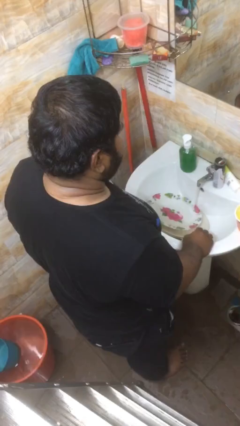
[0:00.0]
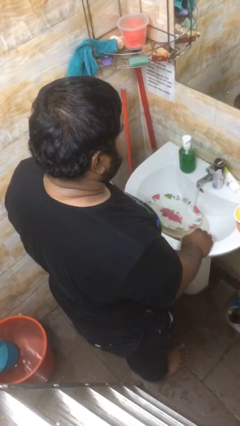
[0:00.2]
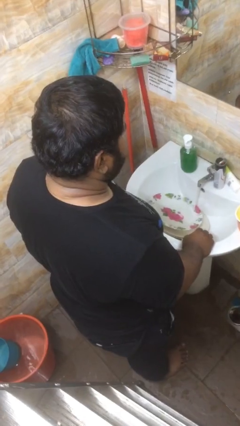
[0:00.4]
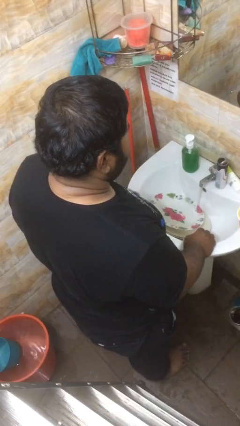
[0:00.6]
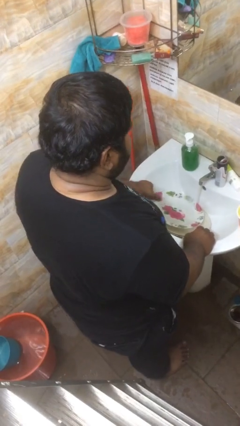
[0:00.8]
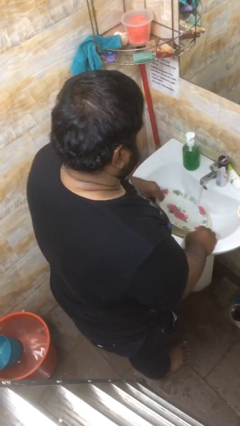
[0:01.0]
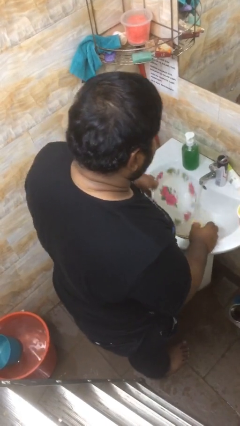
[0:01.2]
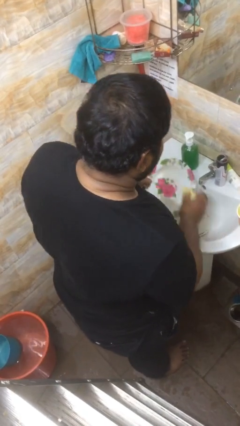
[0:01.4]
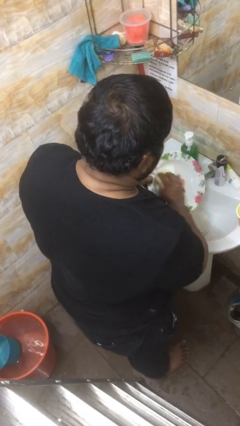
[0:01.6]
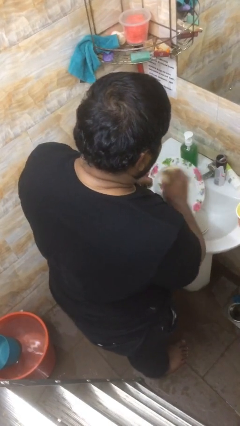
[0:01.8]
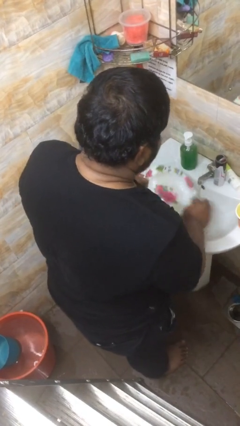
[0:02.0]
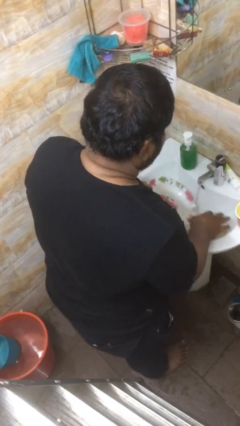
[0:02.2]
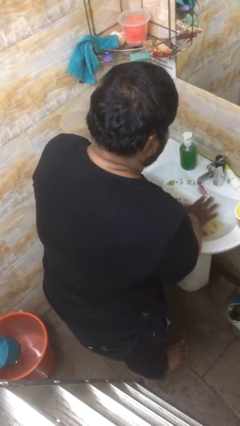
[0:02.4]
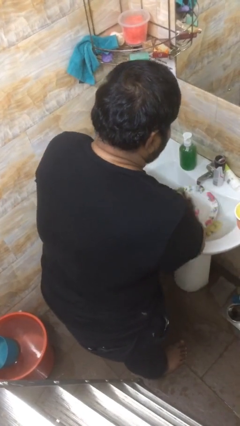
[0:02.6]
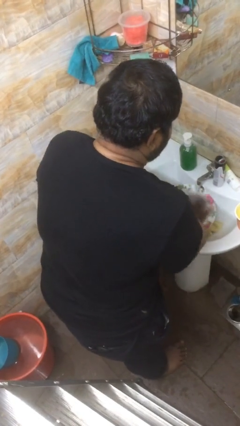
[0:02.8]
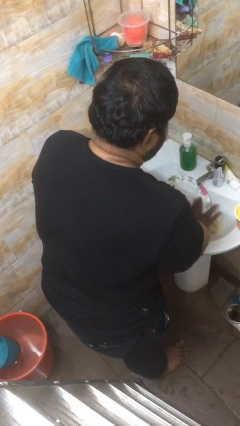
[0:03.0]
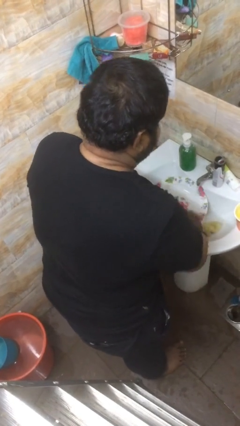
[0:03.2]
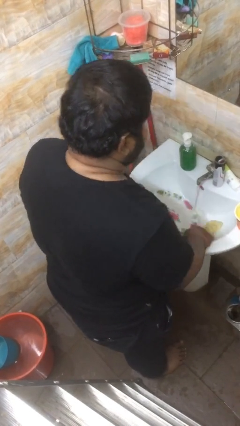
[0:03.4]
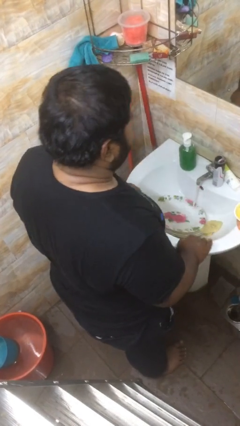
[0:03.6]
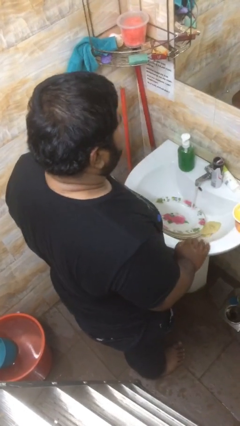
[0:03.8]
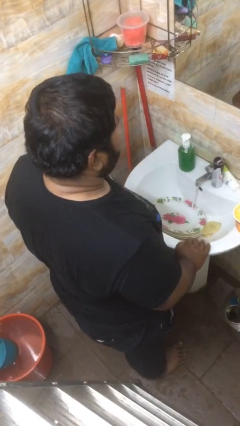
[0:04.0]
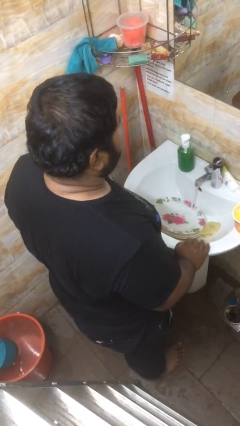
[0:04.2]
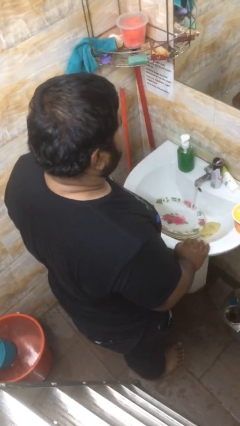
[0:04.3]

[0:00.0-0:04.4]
person washes dish

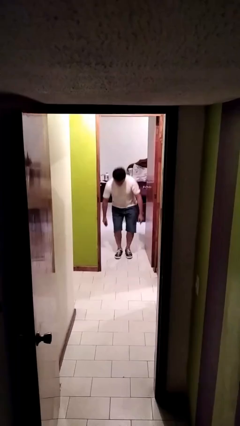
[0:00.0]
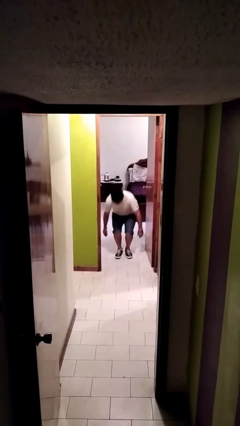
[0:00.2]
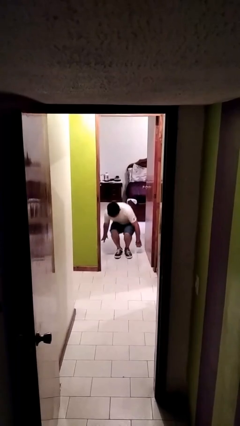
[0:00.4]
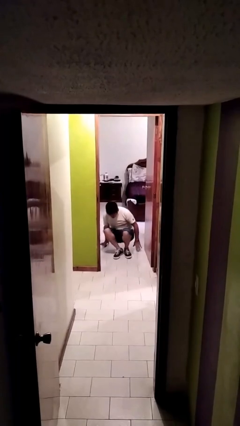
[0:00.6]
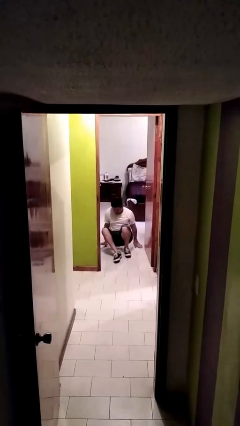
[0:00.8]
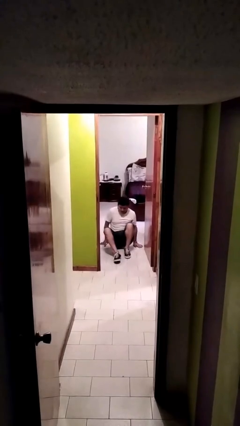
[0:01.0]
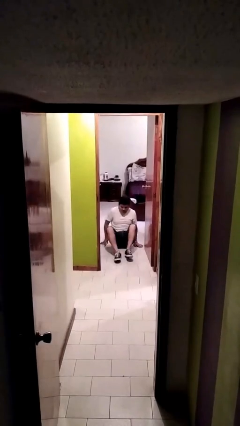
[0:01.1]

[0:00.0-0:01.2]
person sits down

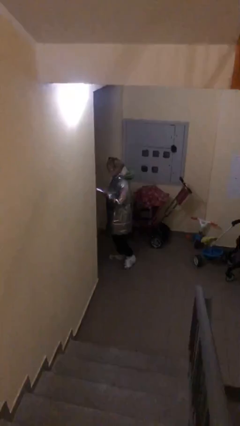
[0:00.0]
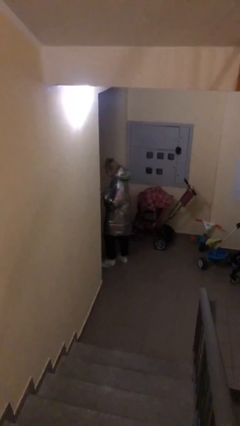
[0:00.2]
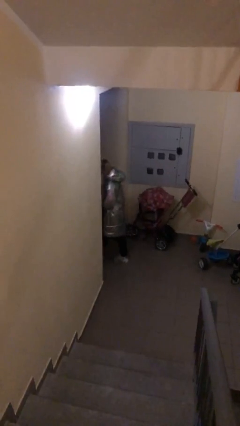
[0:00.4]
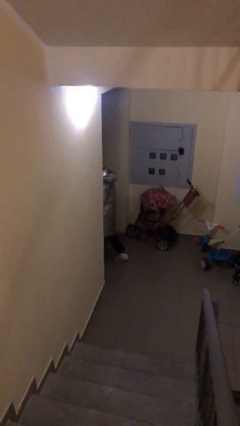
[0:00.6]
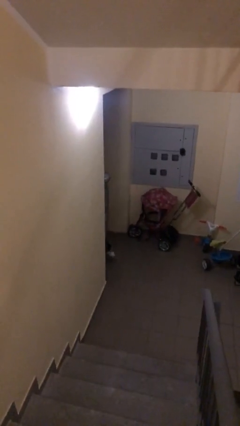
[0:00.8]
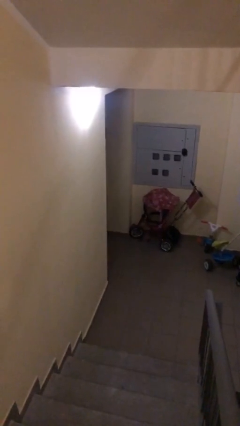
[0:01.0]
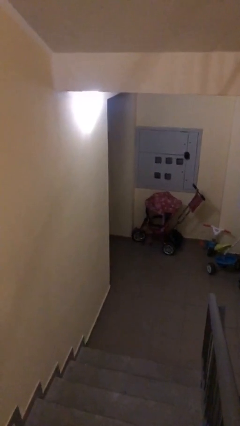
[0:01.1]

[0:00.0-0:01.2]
person exits scene through structure

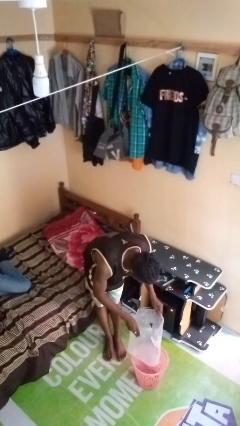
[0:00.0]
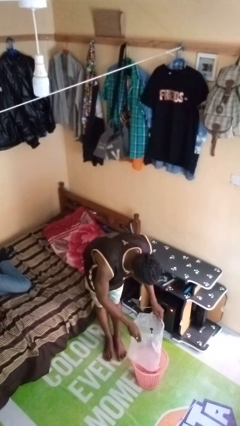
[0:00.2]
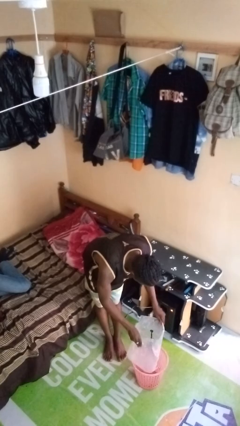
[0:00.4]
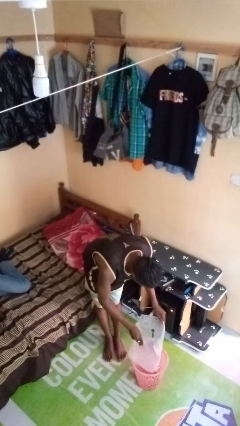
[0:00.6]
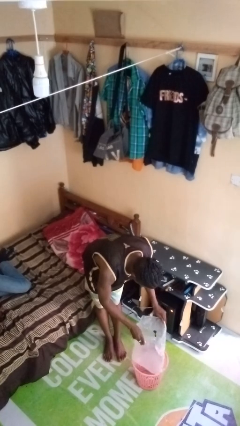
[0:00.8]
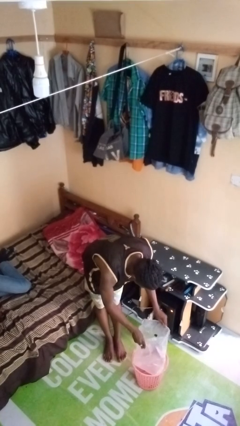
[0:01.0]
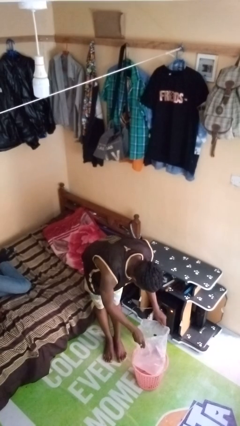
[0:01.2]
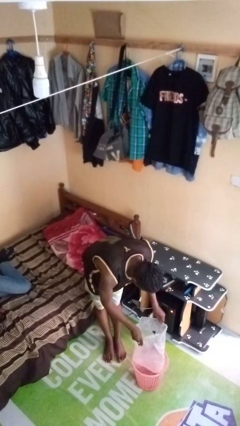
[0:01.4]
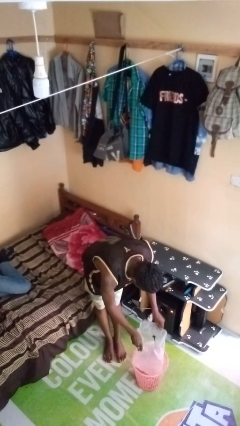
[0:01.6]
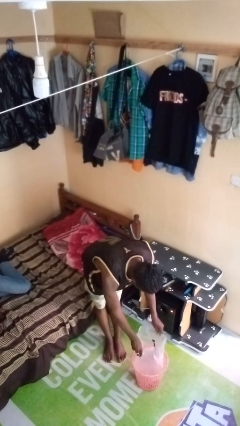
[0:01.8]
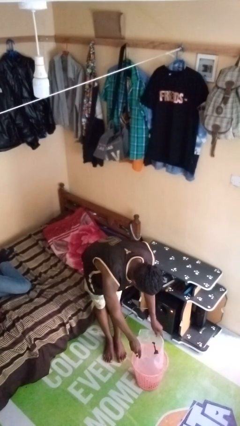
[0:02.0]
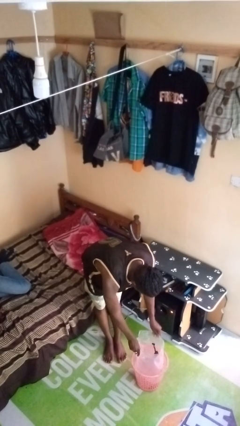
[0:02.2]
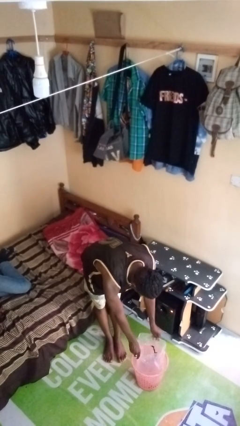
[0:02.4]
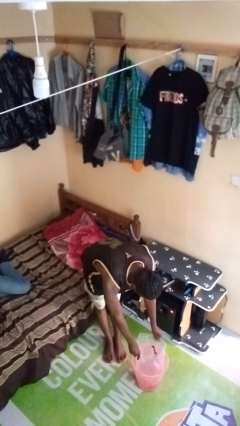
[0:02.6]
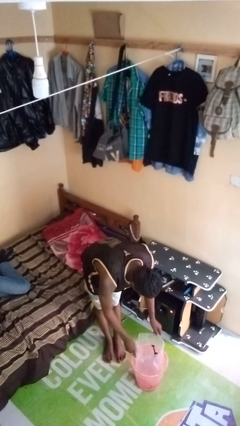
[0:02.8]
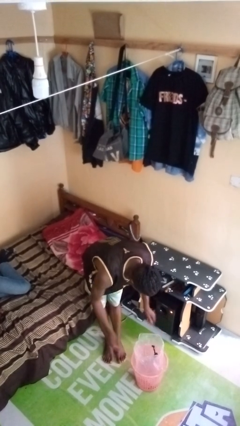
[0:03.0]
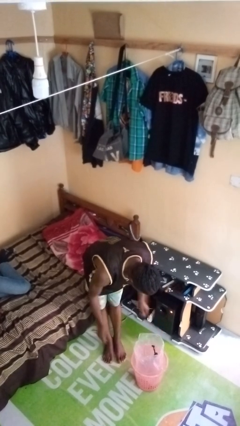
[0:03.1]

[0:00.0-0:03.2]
person inserts trashbag into trashcan

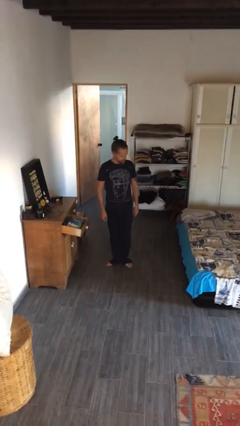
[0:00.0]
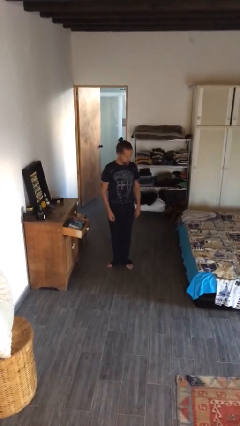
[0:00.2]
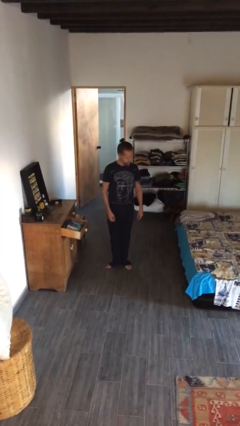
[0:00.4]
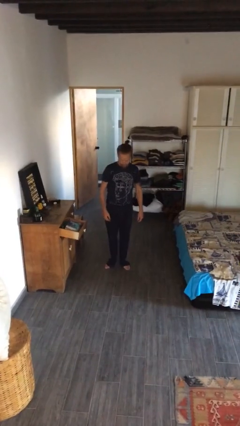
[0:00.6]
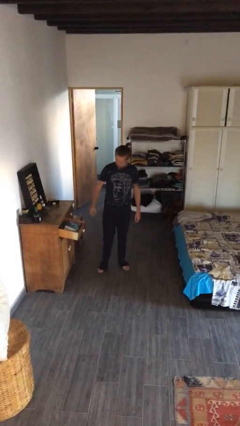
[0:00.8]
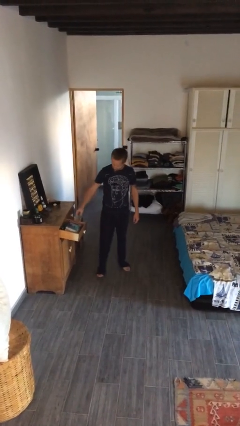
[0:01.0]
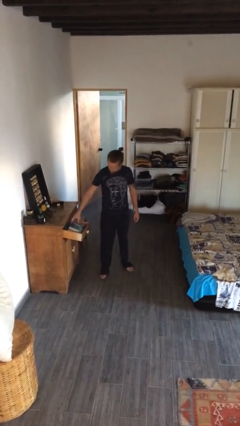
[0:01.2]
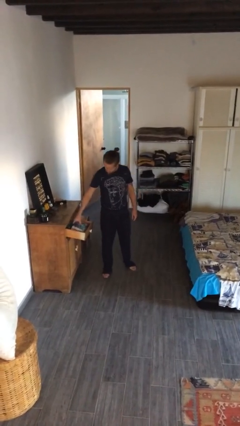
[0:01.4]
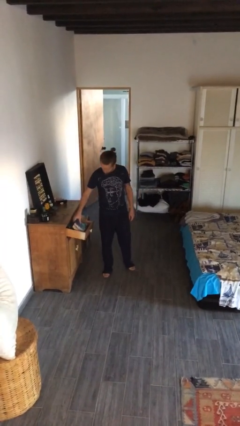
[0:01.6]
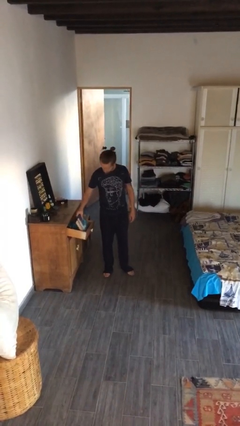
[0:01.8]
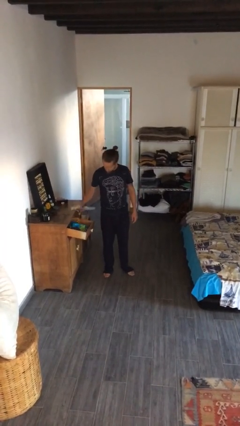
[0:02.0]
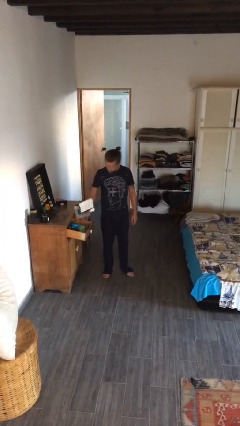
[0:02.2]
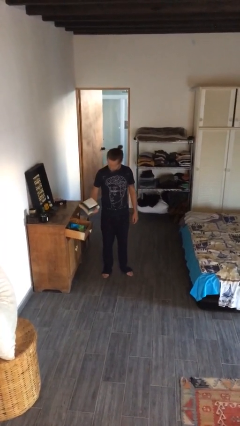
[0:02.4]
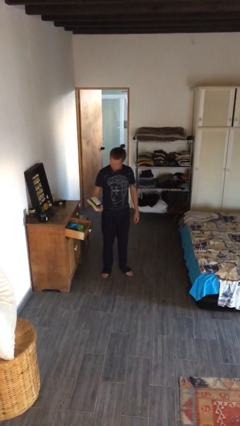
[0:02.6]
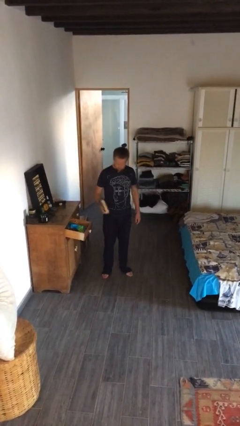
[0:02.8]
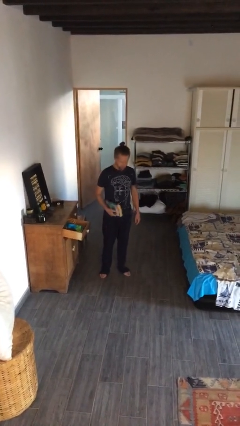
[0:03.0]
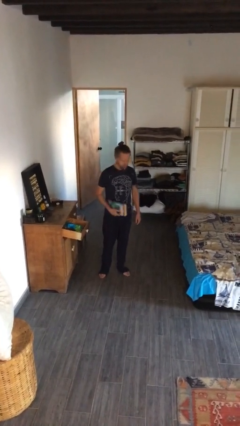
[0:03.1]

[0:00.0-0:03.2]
person picks up object from cabinet

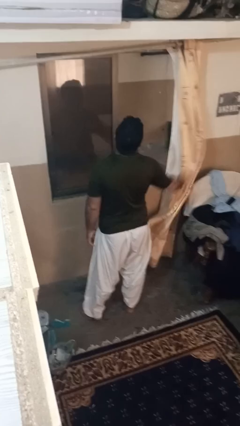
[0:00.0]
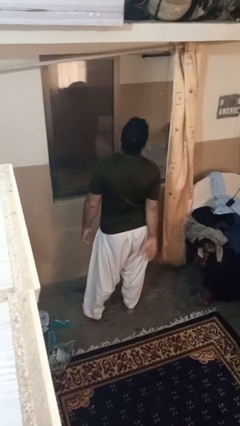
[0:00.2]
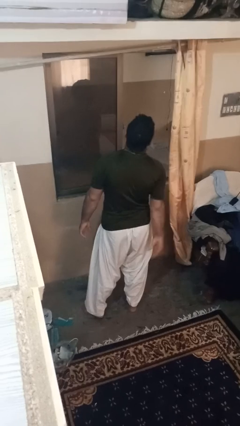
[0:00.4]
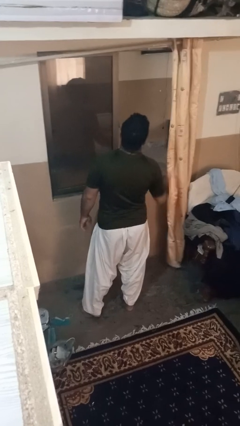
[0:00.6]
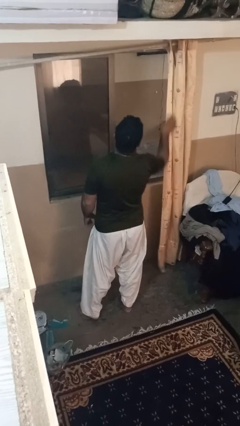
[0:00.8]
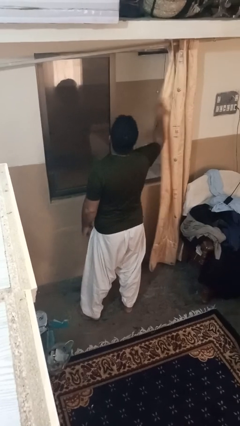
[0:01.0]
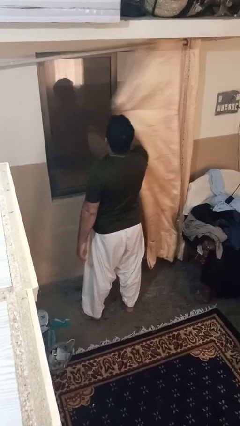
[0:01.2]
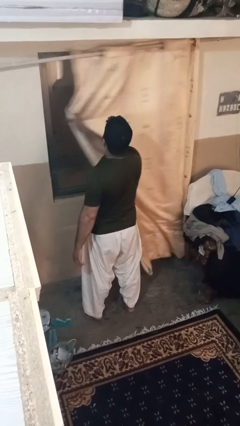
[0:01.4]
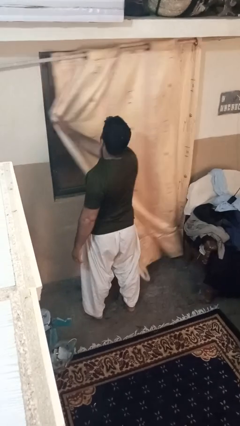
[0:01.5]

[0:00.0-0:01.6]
person closes curtains

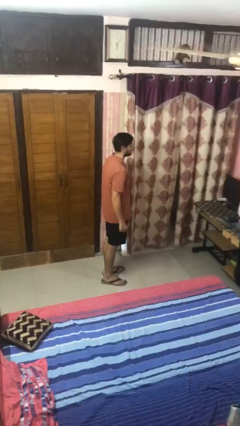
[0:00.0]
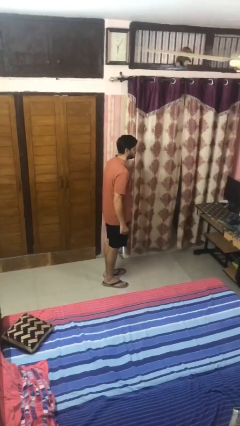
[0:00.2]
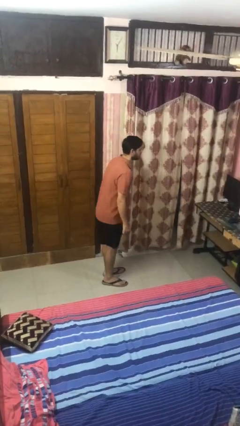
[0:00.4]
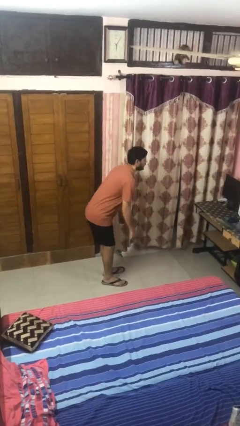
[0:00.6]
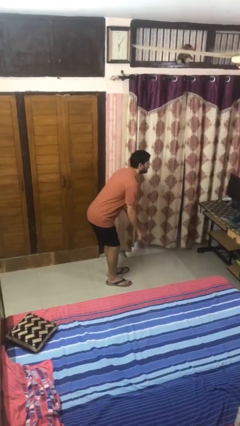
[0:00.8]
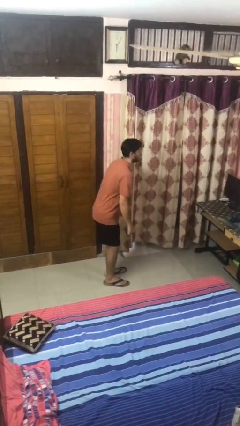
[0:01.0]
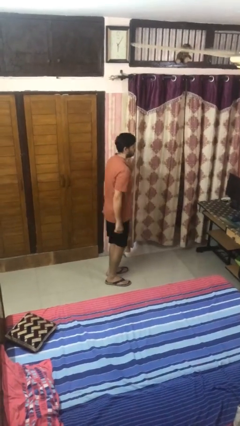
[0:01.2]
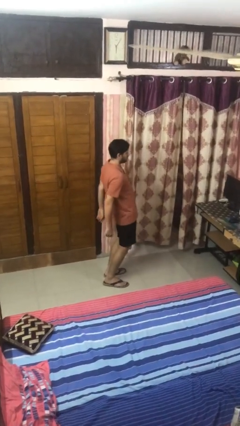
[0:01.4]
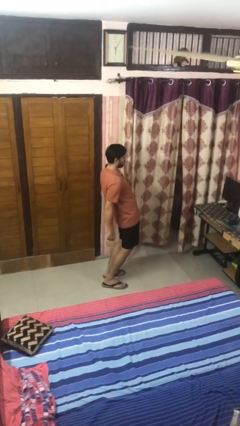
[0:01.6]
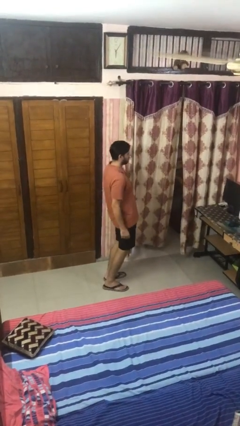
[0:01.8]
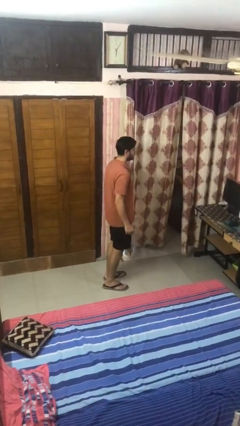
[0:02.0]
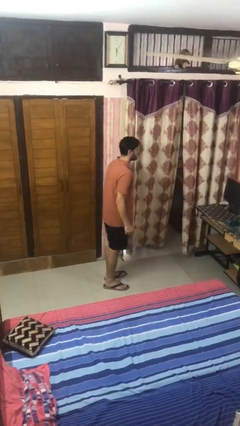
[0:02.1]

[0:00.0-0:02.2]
person wiggles hips

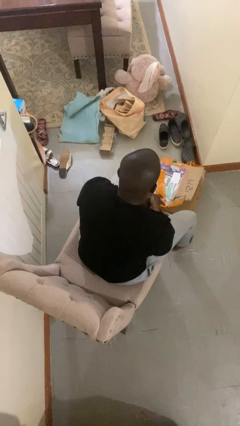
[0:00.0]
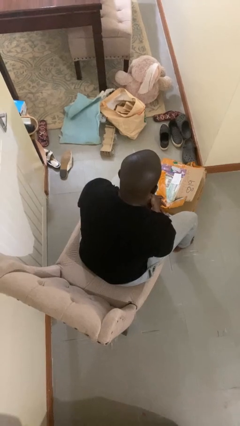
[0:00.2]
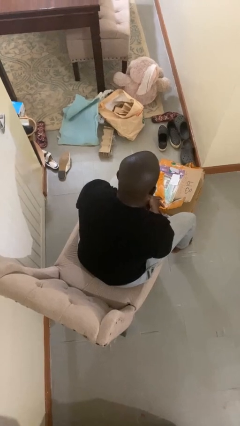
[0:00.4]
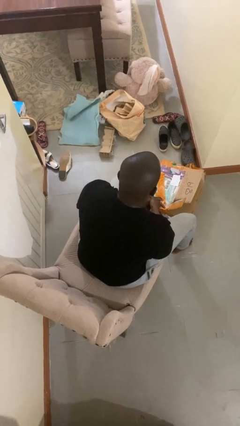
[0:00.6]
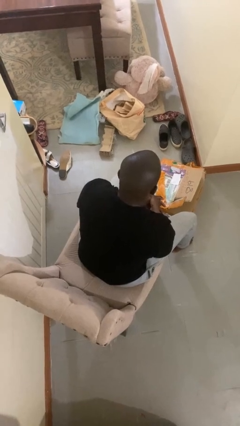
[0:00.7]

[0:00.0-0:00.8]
person closes box
